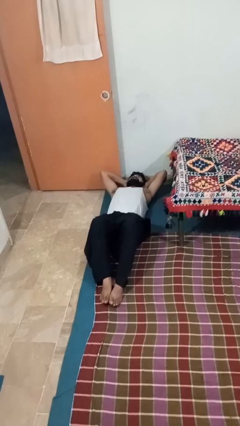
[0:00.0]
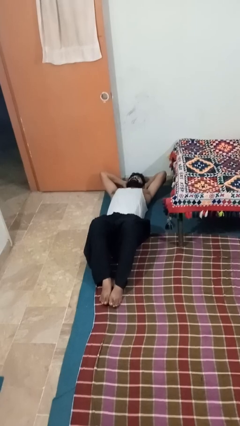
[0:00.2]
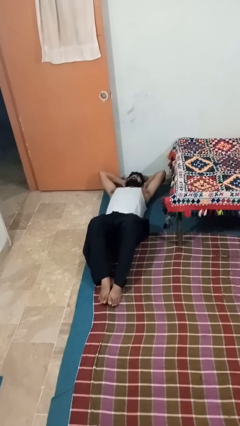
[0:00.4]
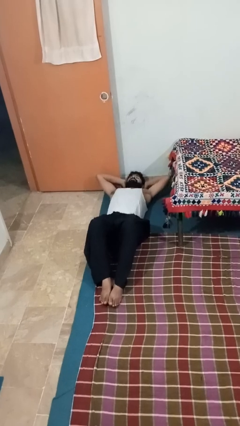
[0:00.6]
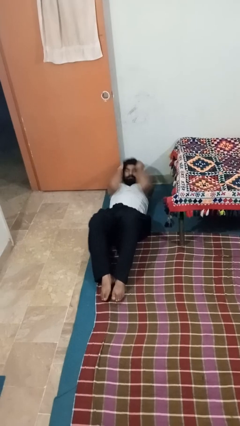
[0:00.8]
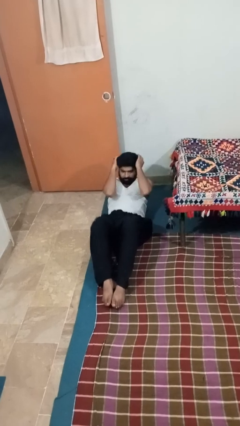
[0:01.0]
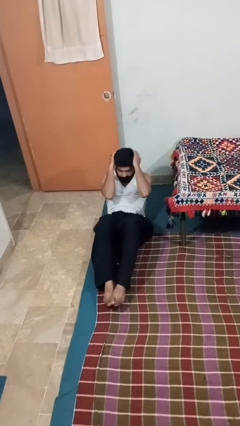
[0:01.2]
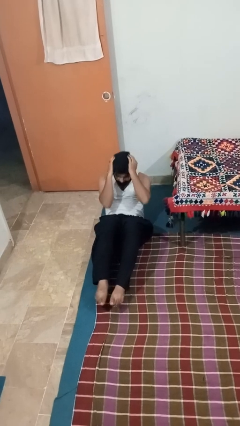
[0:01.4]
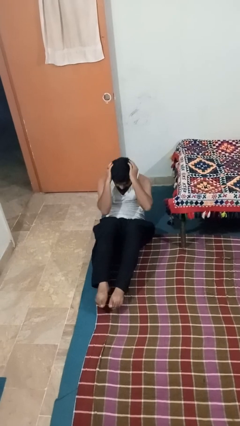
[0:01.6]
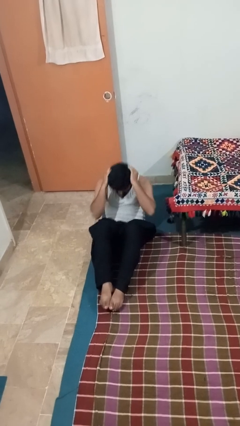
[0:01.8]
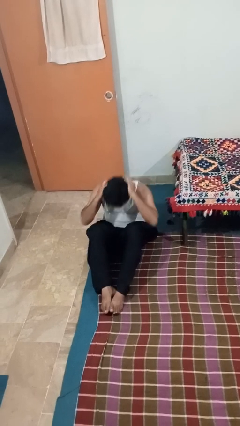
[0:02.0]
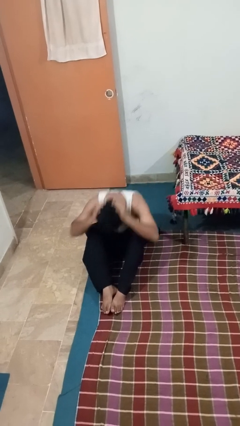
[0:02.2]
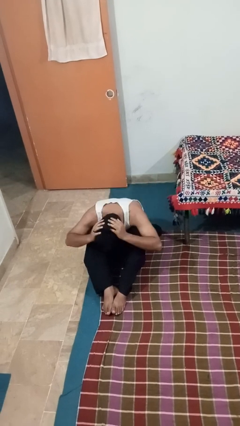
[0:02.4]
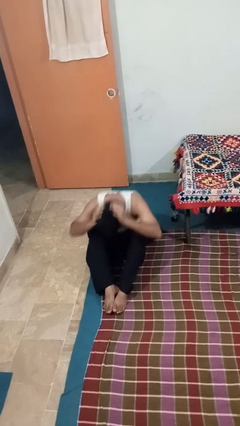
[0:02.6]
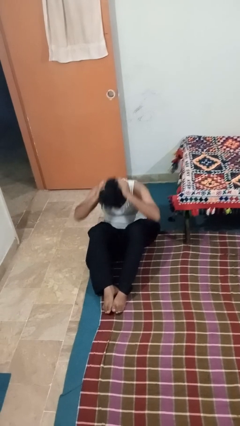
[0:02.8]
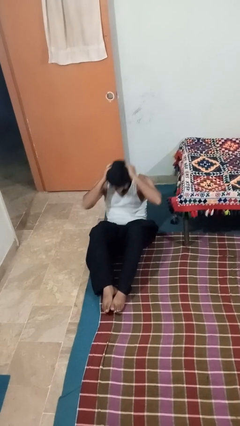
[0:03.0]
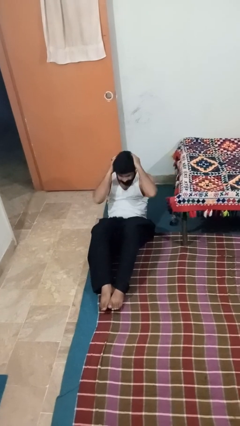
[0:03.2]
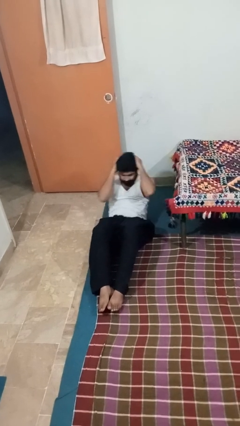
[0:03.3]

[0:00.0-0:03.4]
person exercises with situp

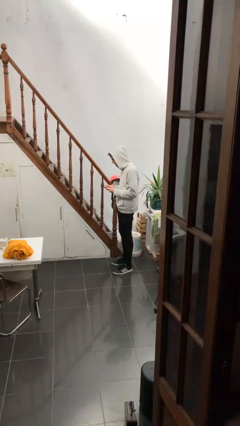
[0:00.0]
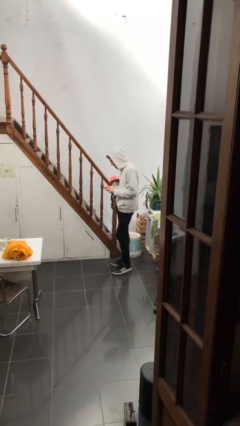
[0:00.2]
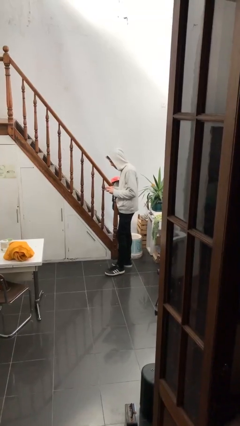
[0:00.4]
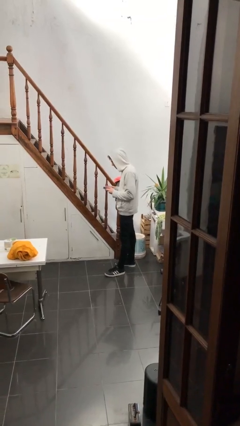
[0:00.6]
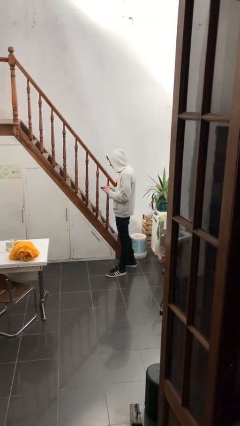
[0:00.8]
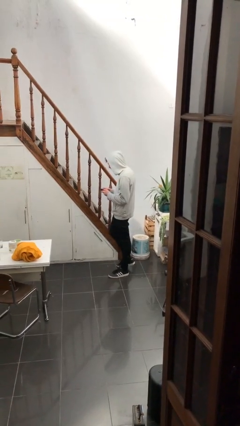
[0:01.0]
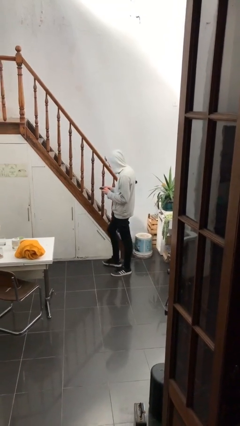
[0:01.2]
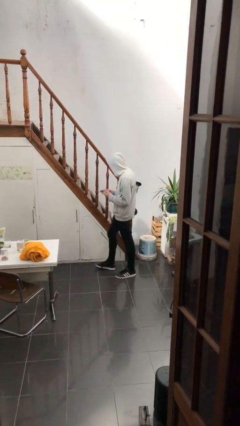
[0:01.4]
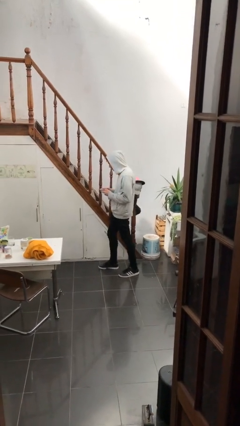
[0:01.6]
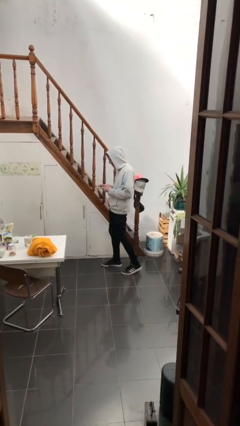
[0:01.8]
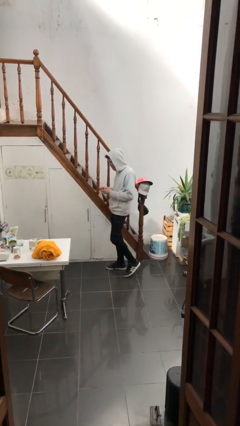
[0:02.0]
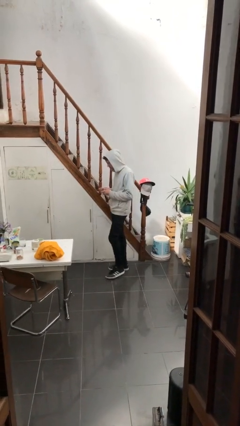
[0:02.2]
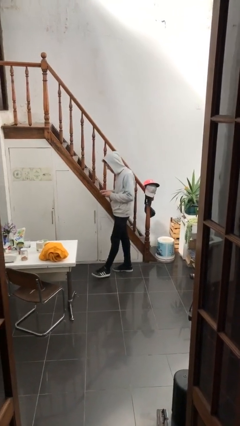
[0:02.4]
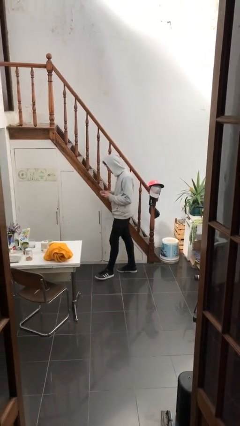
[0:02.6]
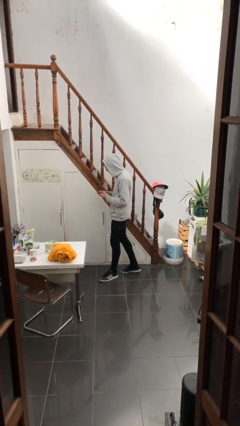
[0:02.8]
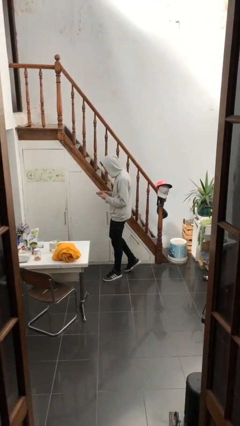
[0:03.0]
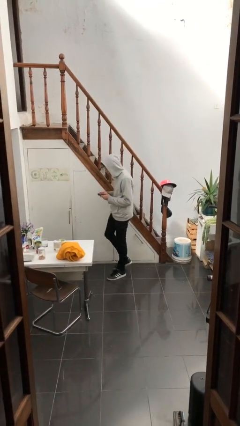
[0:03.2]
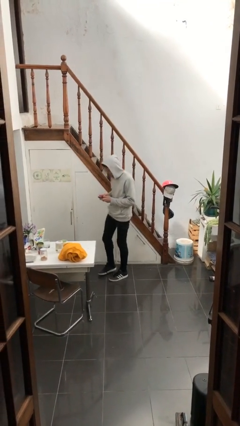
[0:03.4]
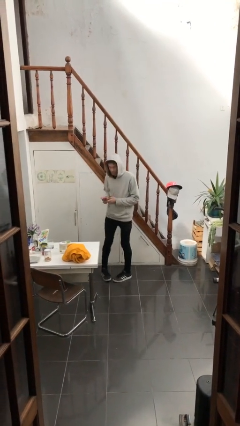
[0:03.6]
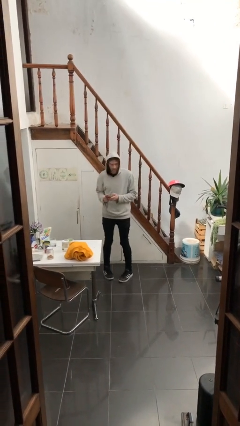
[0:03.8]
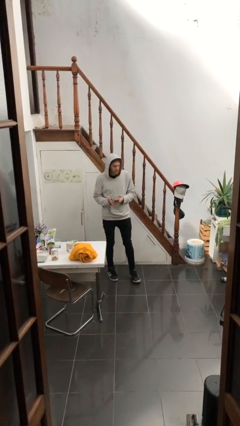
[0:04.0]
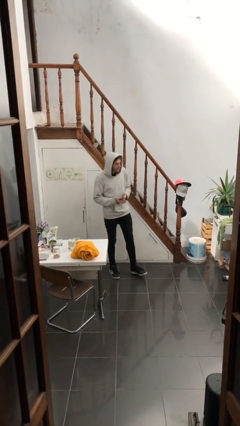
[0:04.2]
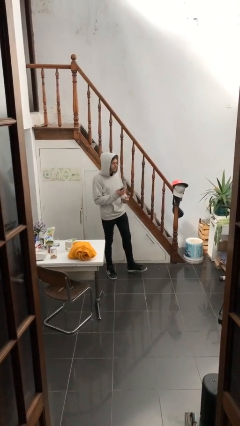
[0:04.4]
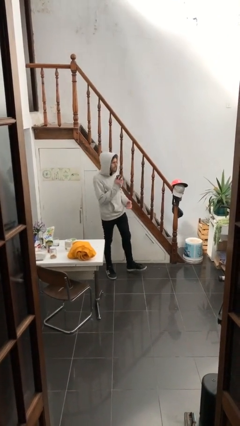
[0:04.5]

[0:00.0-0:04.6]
person texts on phone

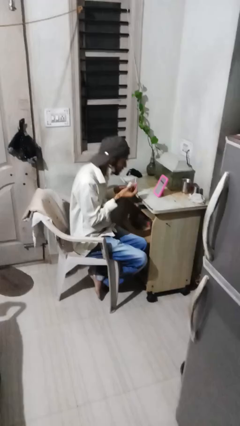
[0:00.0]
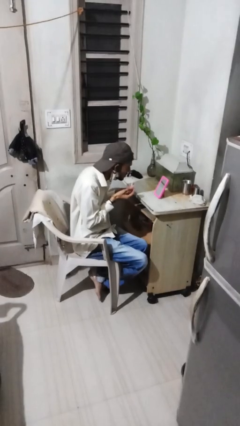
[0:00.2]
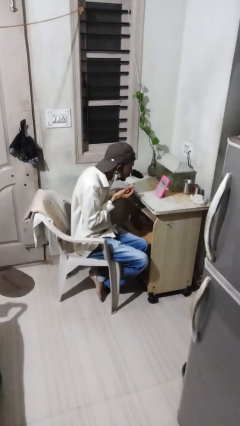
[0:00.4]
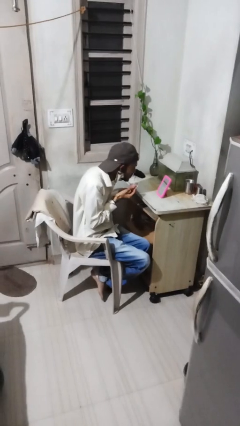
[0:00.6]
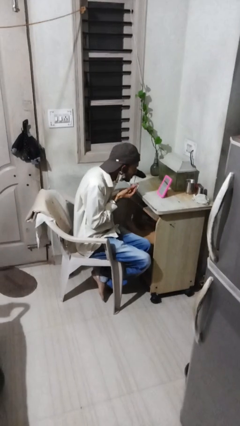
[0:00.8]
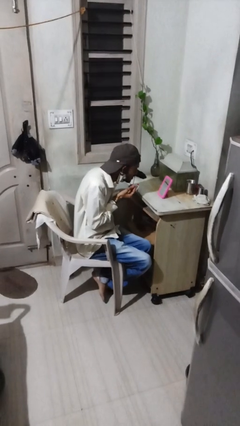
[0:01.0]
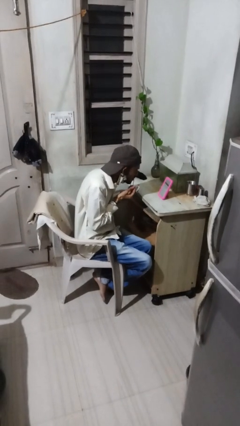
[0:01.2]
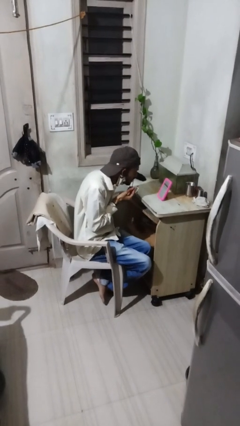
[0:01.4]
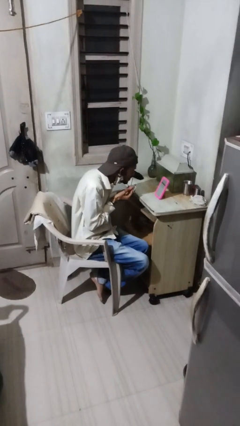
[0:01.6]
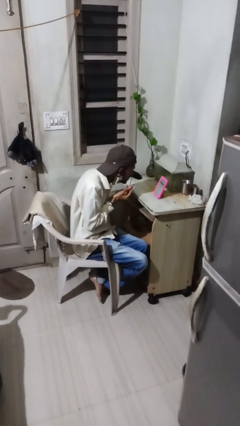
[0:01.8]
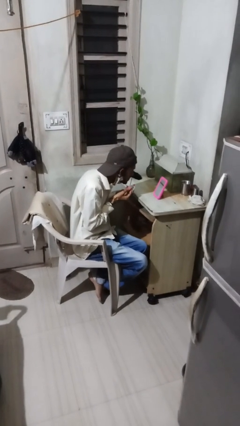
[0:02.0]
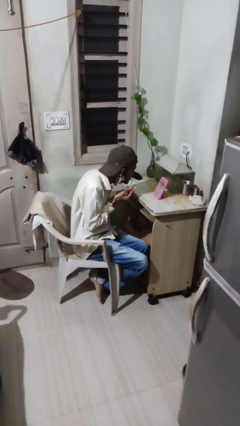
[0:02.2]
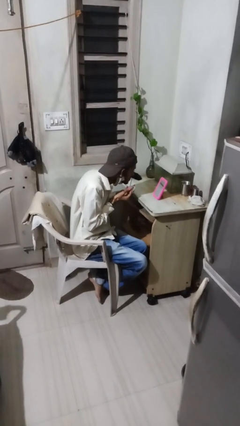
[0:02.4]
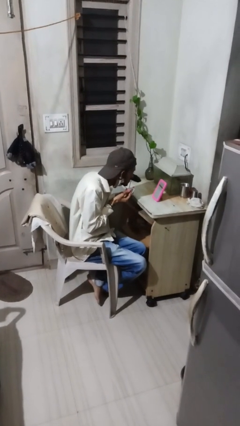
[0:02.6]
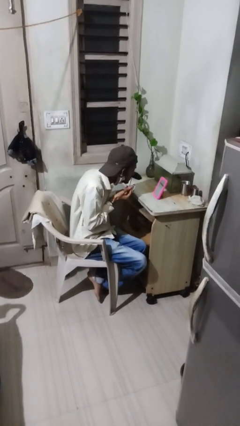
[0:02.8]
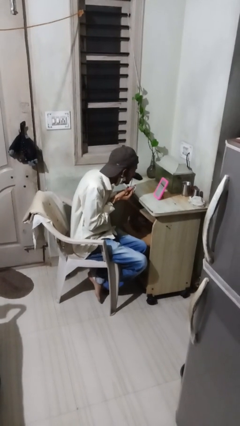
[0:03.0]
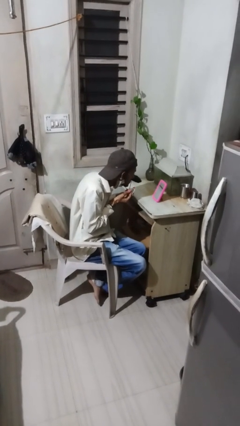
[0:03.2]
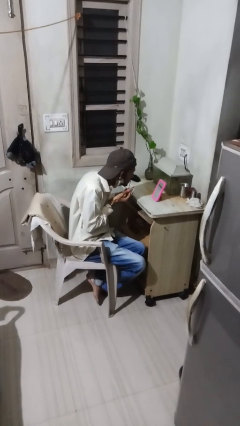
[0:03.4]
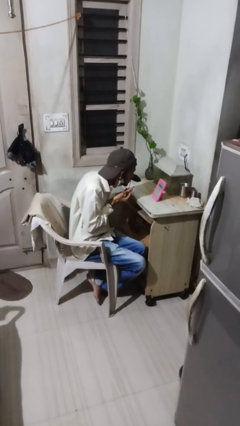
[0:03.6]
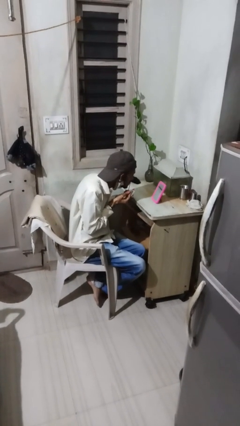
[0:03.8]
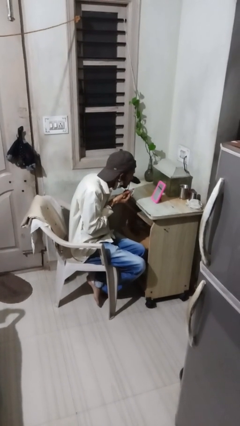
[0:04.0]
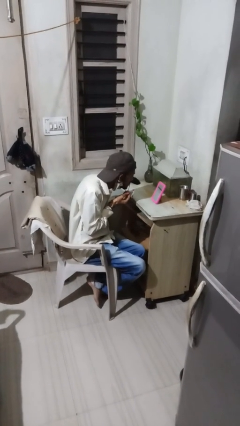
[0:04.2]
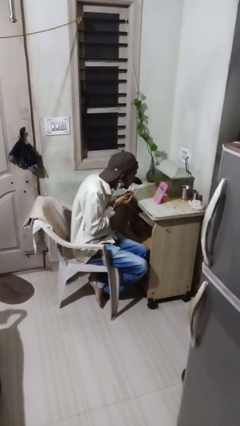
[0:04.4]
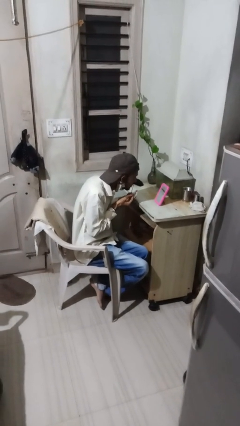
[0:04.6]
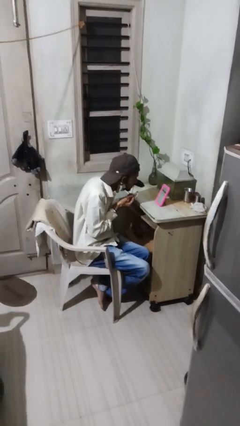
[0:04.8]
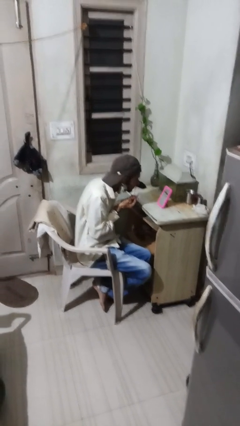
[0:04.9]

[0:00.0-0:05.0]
person applies lip makeup

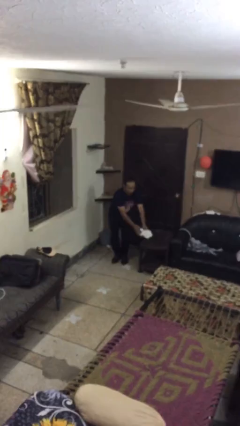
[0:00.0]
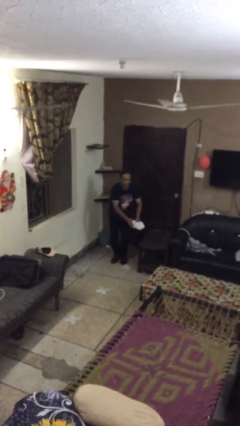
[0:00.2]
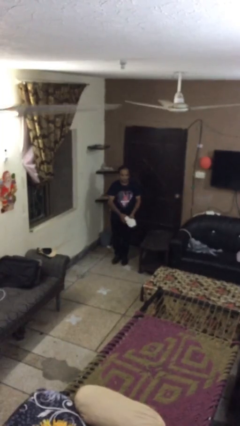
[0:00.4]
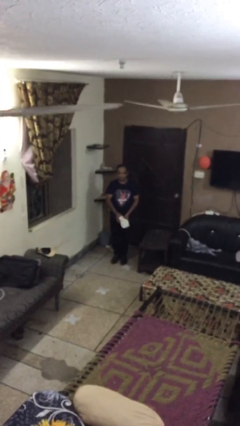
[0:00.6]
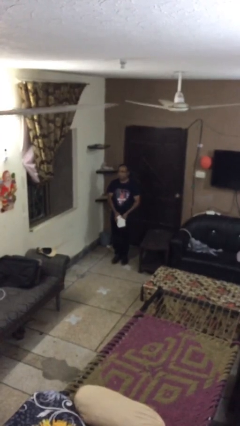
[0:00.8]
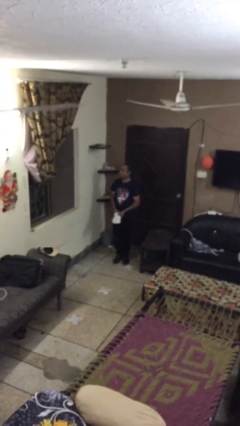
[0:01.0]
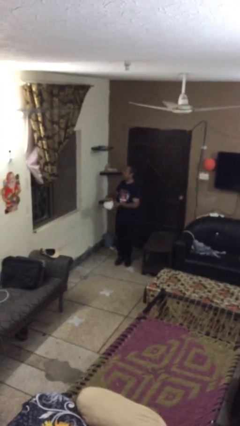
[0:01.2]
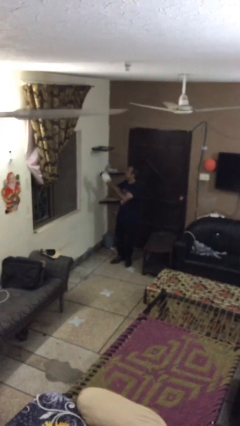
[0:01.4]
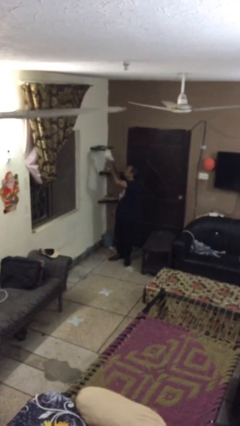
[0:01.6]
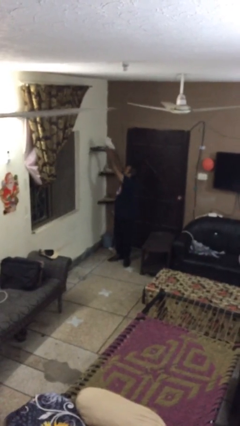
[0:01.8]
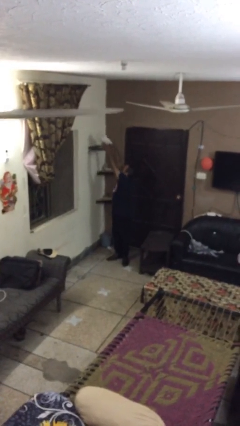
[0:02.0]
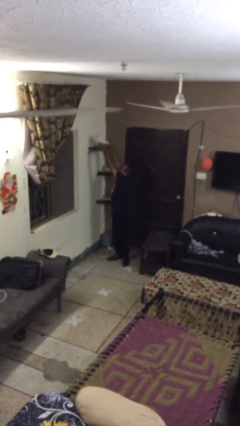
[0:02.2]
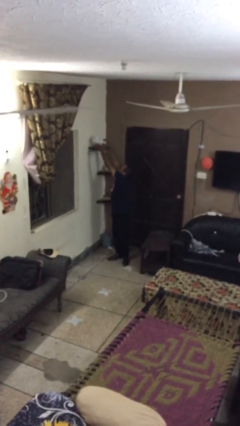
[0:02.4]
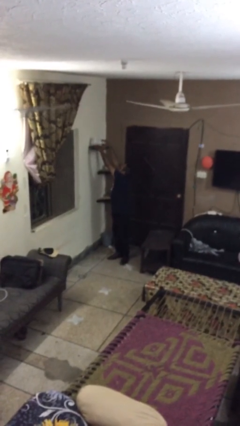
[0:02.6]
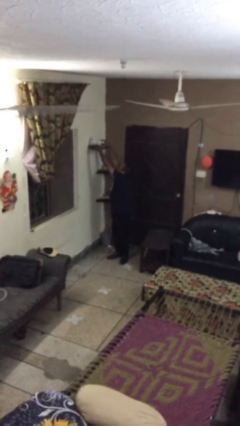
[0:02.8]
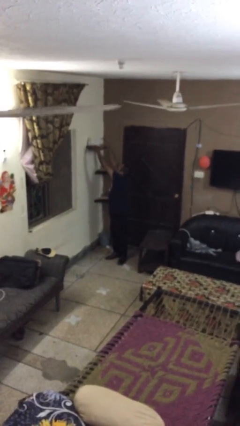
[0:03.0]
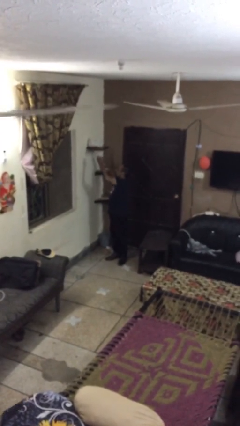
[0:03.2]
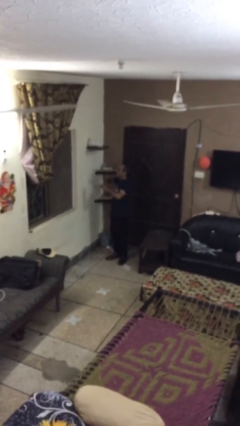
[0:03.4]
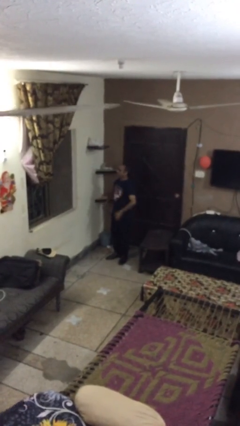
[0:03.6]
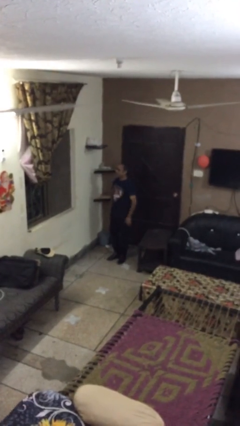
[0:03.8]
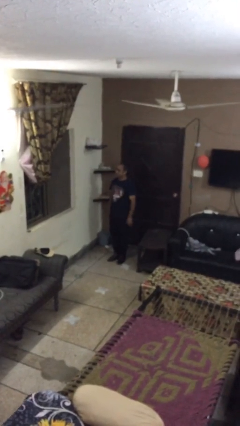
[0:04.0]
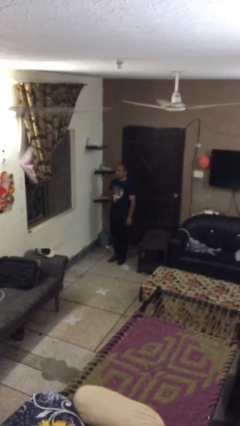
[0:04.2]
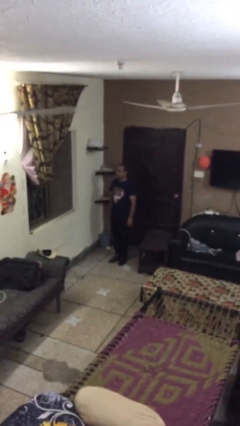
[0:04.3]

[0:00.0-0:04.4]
person puts down object on shelf

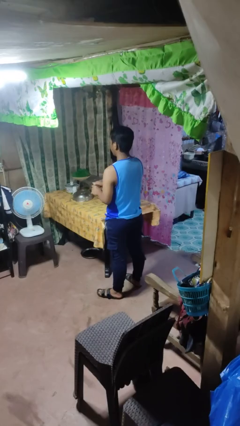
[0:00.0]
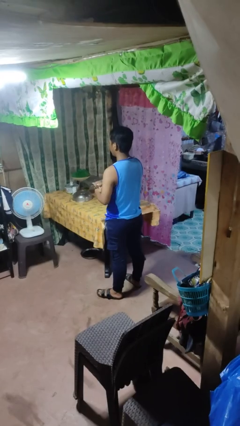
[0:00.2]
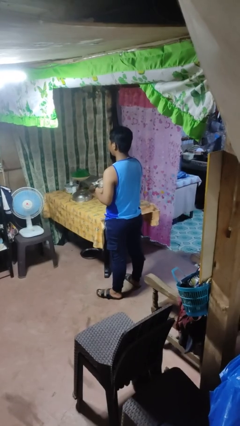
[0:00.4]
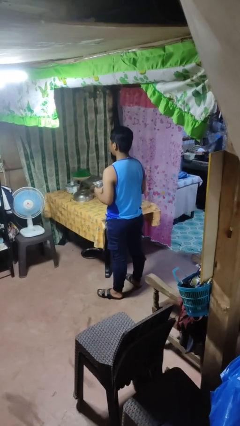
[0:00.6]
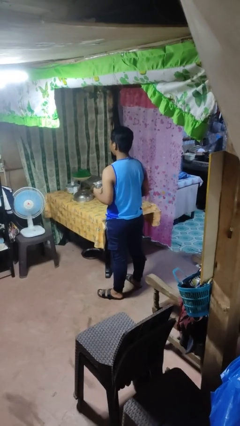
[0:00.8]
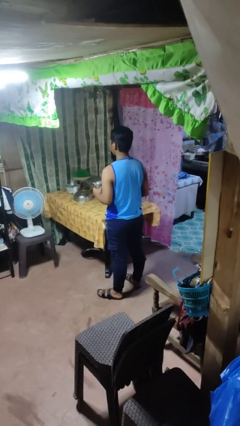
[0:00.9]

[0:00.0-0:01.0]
person opens jar
